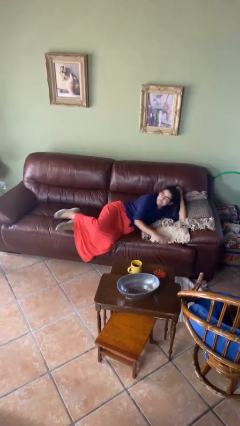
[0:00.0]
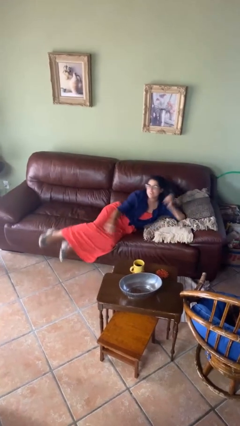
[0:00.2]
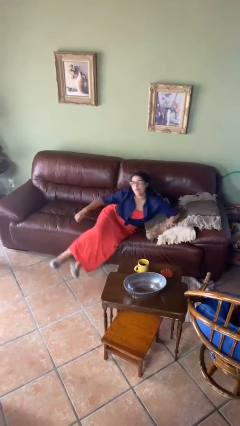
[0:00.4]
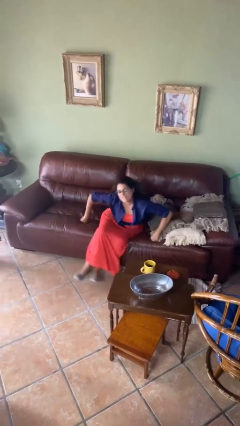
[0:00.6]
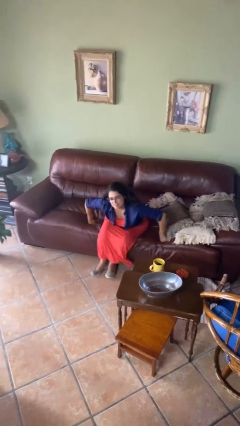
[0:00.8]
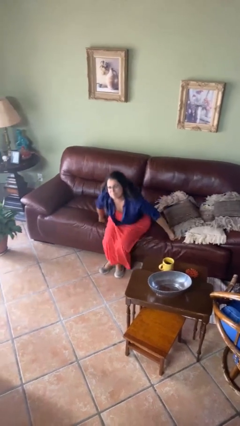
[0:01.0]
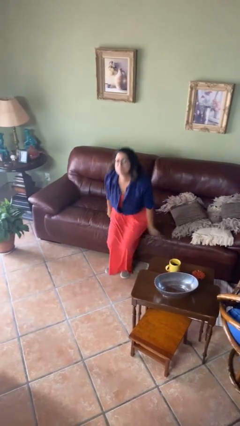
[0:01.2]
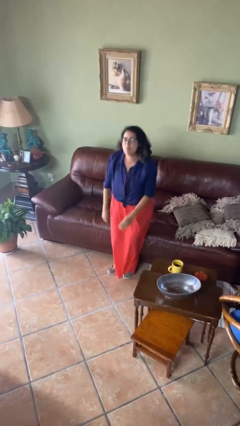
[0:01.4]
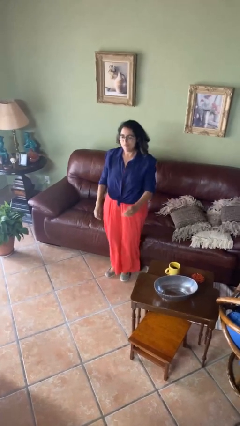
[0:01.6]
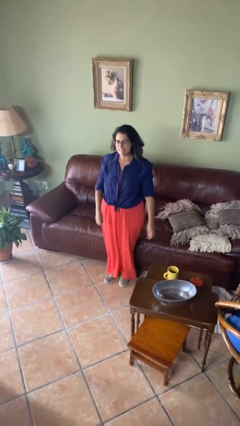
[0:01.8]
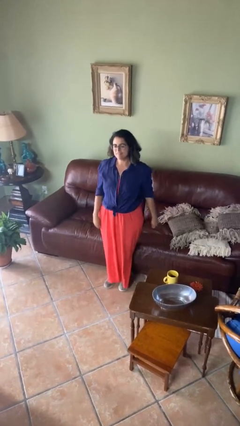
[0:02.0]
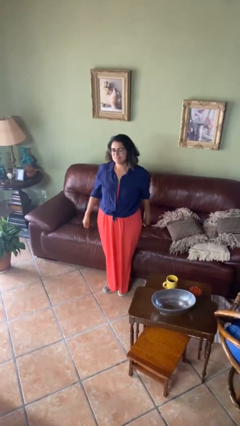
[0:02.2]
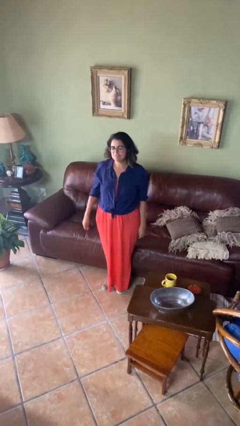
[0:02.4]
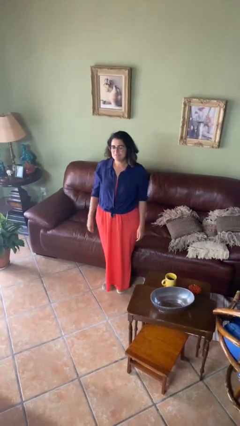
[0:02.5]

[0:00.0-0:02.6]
person stands up

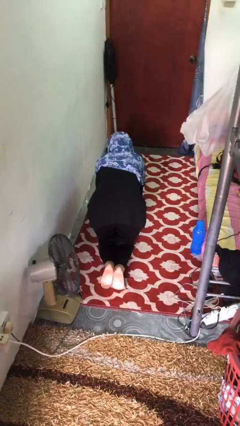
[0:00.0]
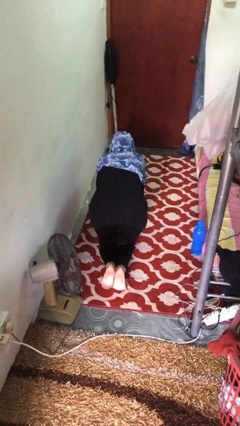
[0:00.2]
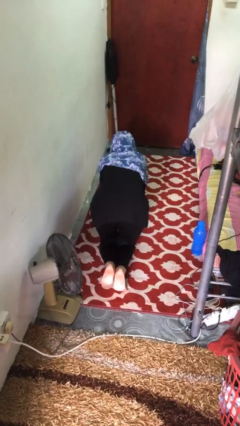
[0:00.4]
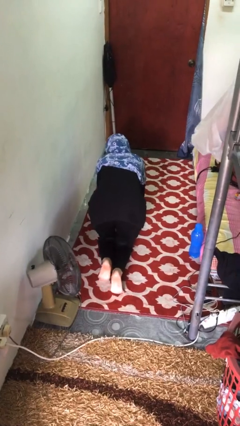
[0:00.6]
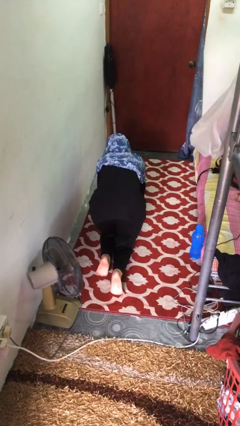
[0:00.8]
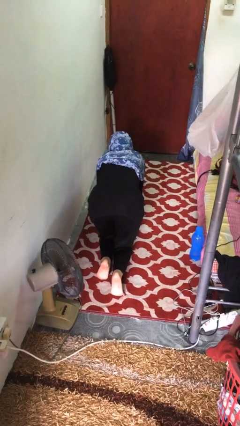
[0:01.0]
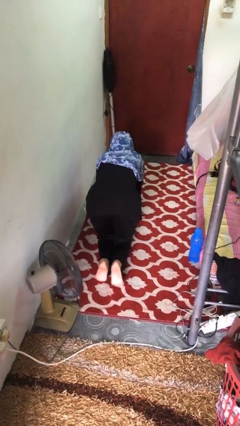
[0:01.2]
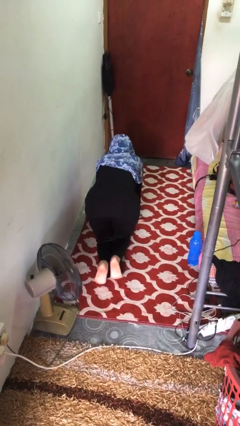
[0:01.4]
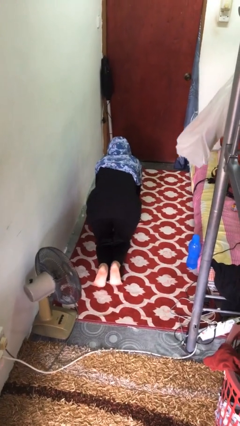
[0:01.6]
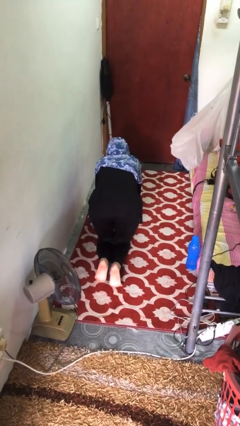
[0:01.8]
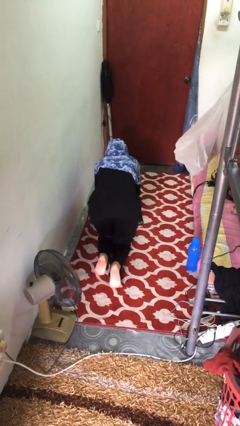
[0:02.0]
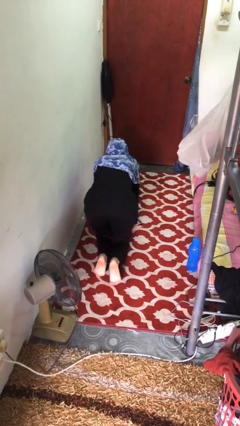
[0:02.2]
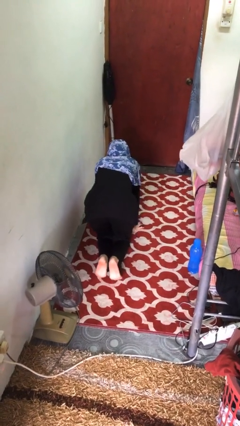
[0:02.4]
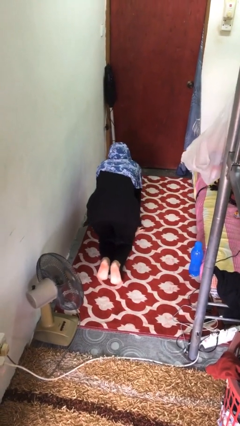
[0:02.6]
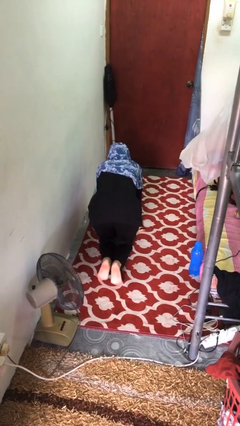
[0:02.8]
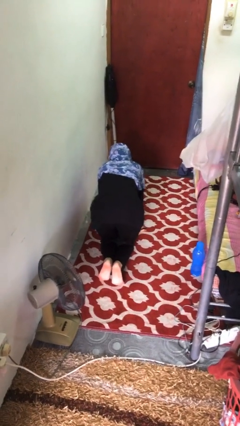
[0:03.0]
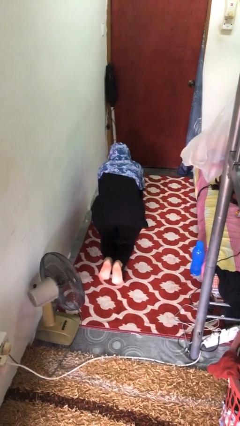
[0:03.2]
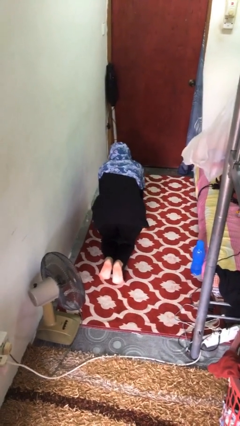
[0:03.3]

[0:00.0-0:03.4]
person crawls

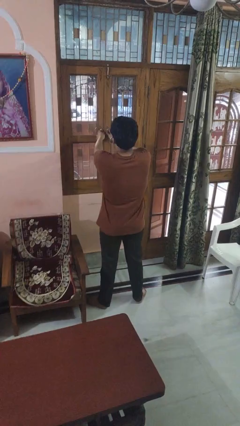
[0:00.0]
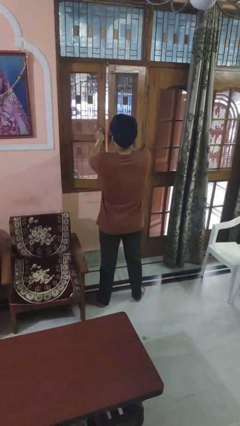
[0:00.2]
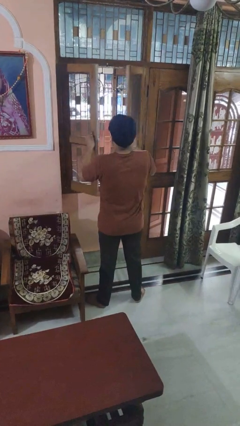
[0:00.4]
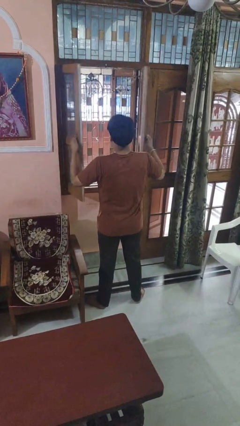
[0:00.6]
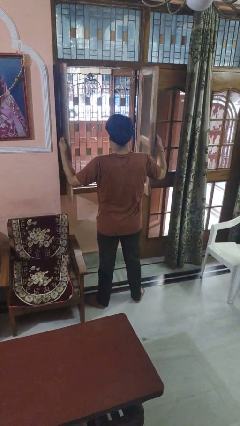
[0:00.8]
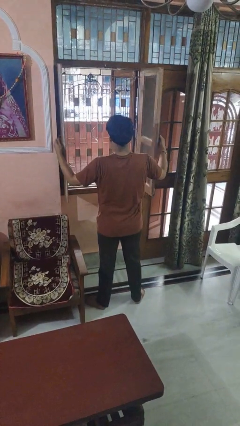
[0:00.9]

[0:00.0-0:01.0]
person opens home window

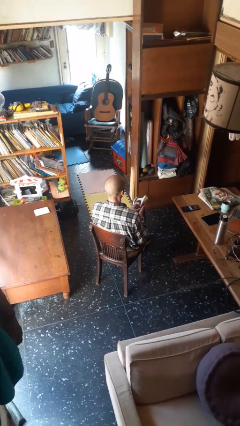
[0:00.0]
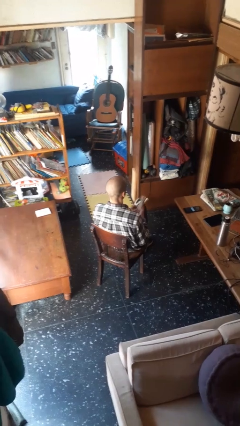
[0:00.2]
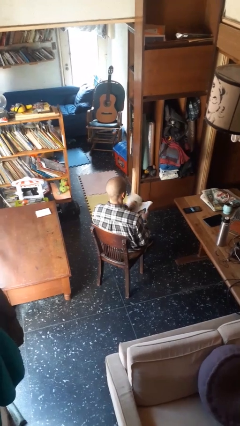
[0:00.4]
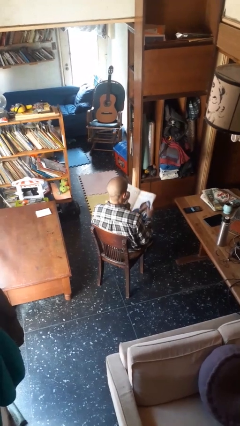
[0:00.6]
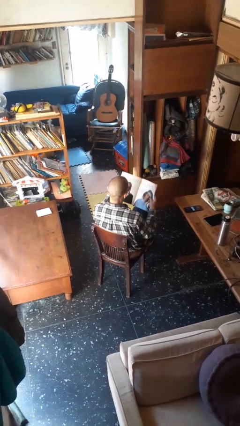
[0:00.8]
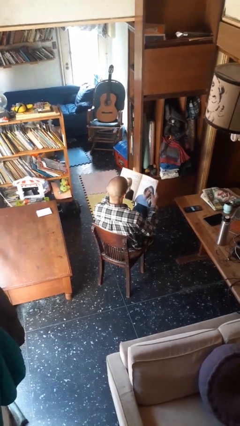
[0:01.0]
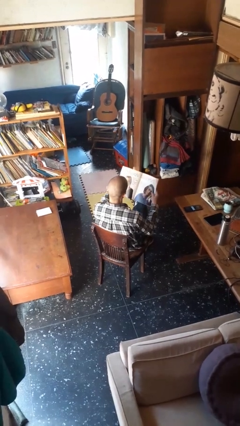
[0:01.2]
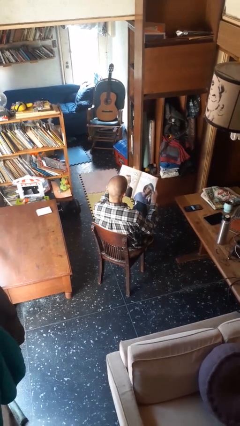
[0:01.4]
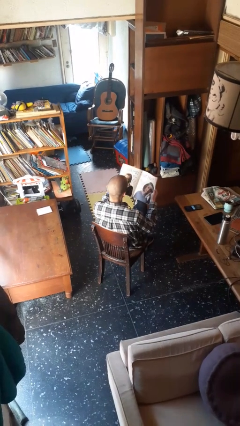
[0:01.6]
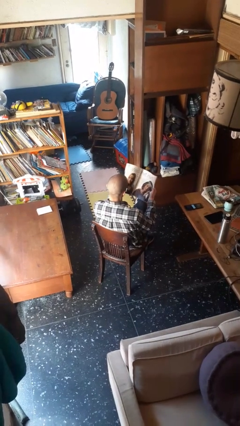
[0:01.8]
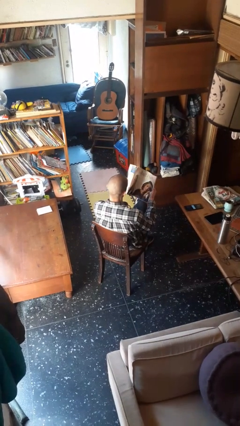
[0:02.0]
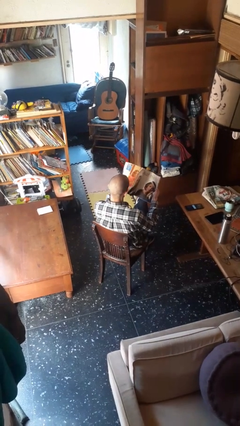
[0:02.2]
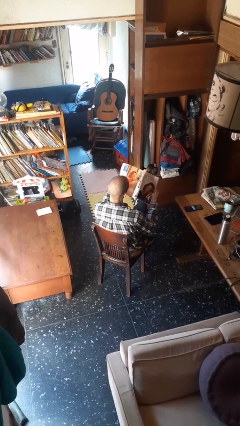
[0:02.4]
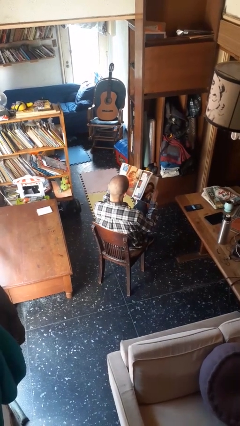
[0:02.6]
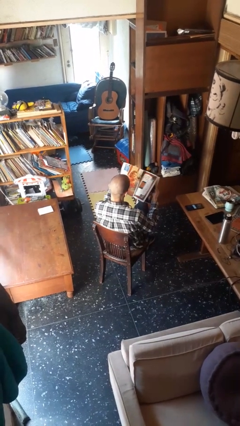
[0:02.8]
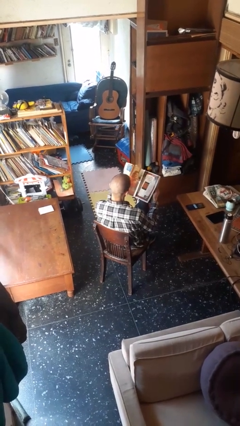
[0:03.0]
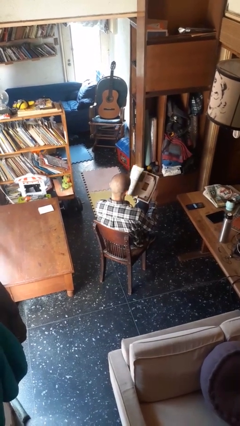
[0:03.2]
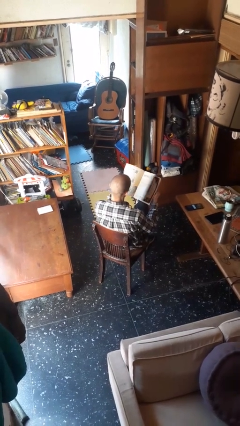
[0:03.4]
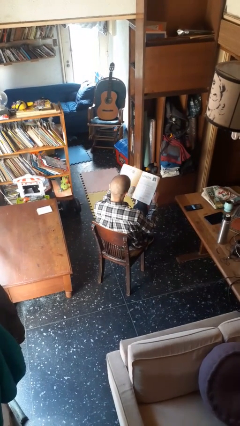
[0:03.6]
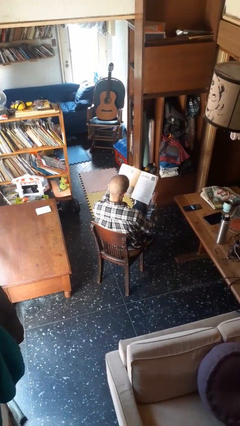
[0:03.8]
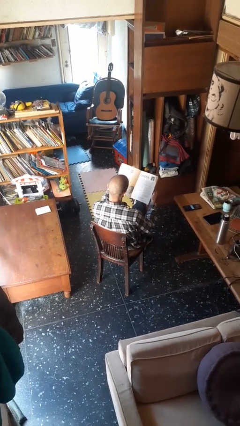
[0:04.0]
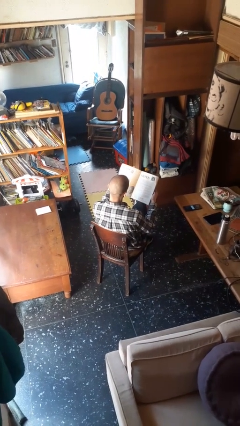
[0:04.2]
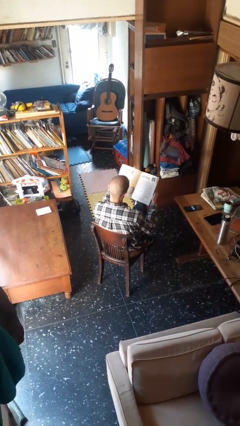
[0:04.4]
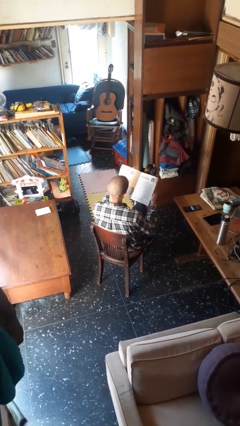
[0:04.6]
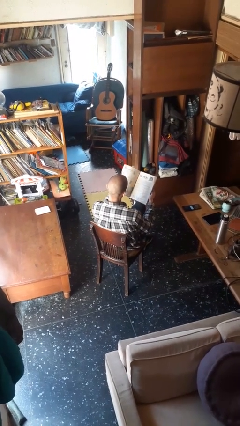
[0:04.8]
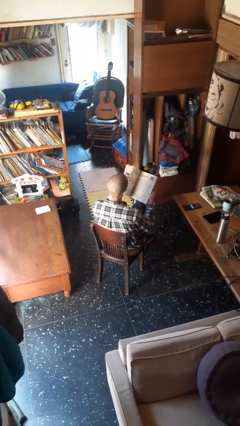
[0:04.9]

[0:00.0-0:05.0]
person reads magazine

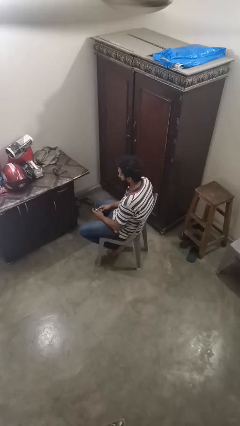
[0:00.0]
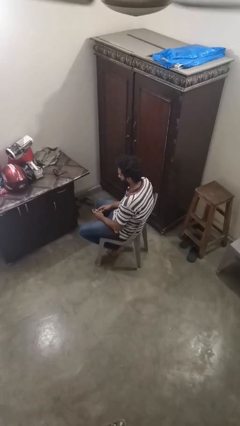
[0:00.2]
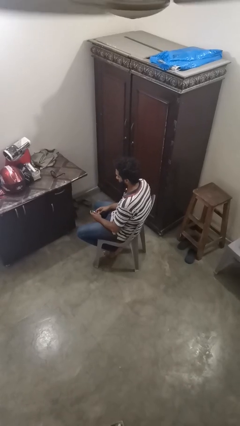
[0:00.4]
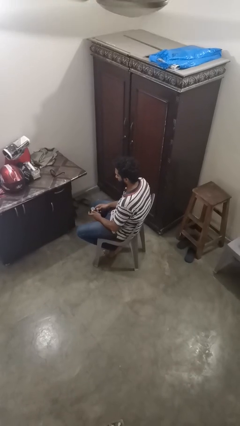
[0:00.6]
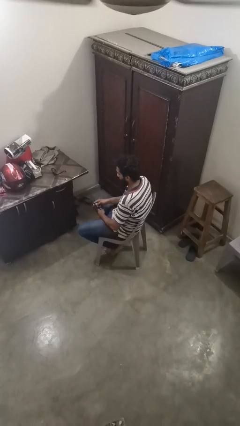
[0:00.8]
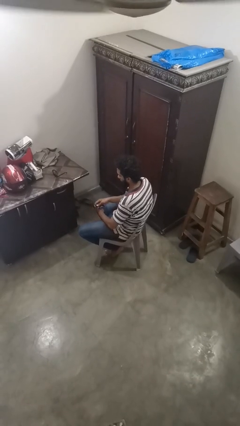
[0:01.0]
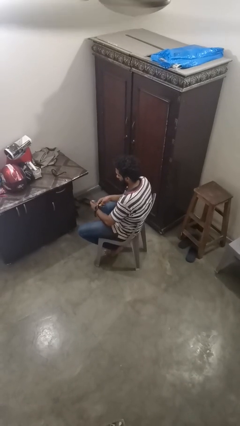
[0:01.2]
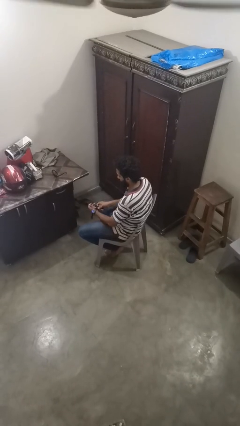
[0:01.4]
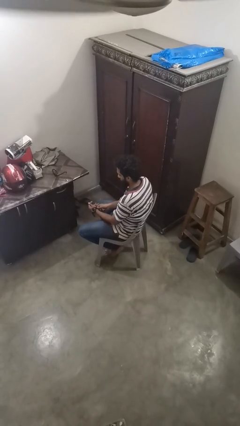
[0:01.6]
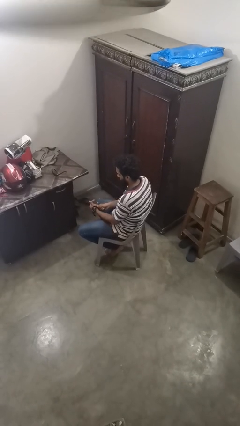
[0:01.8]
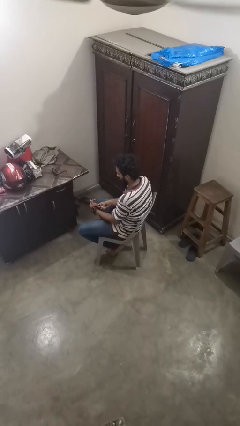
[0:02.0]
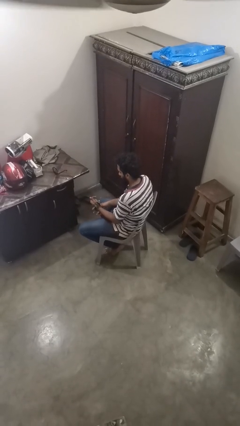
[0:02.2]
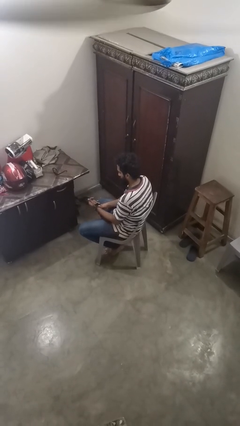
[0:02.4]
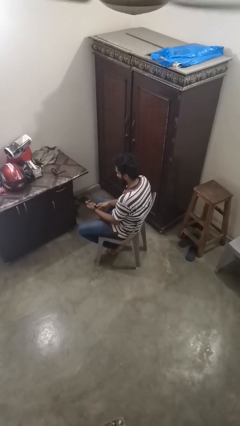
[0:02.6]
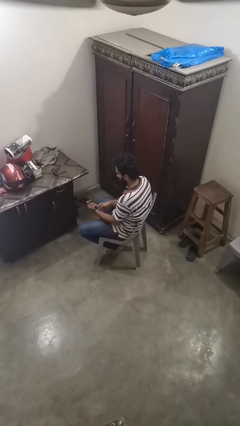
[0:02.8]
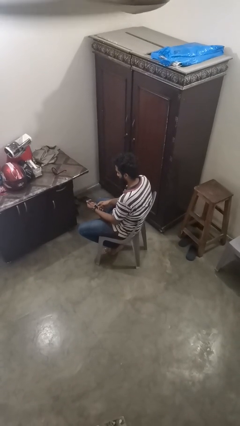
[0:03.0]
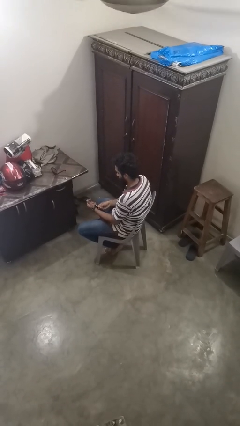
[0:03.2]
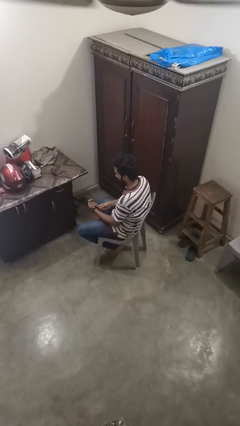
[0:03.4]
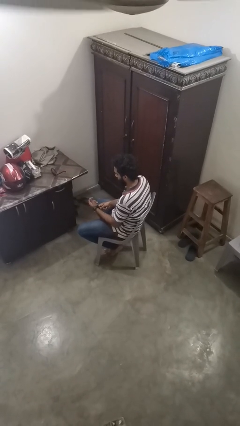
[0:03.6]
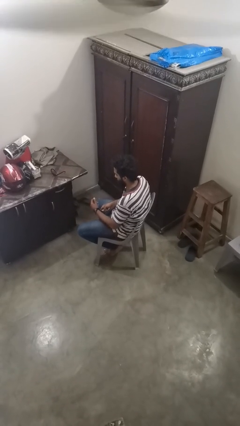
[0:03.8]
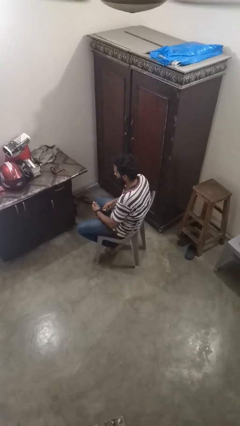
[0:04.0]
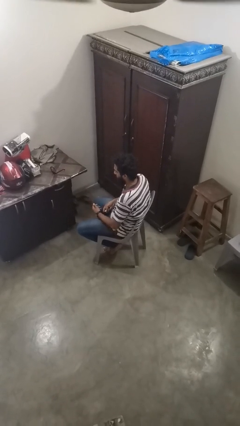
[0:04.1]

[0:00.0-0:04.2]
person puts on wristwatch

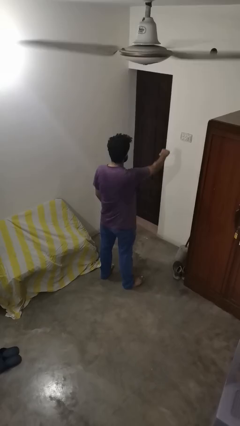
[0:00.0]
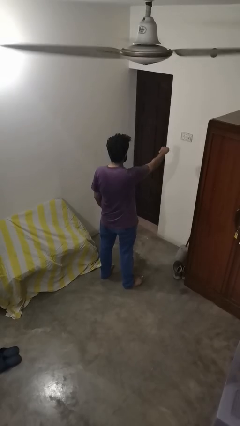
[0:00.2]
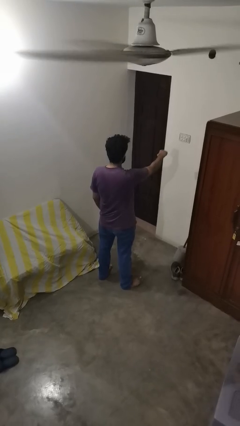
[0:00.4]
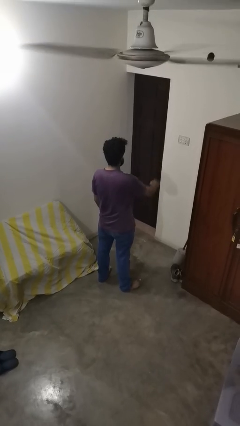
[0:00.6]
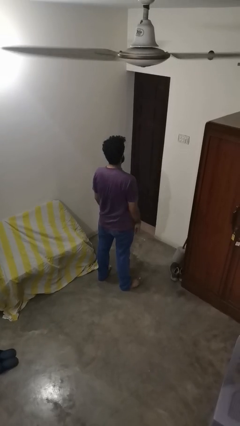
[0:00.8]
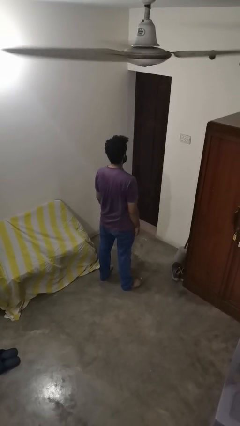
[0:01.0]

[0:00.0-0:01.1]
person punches
